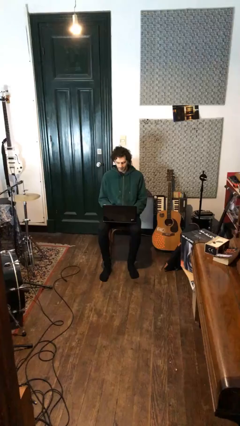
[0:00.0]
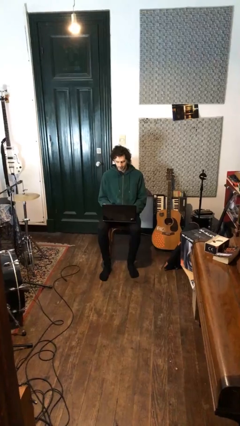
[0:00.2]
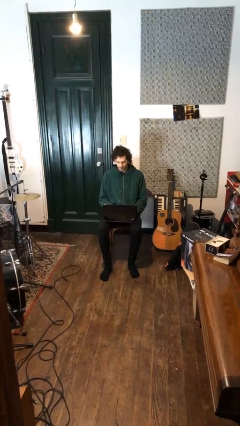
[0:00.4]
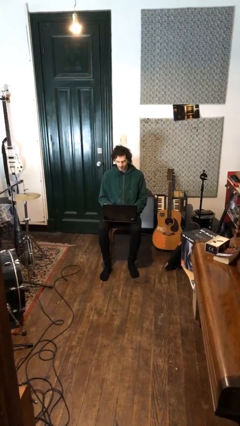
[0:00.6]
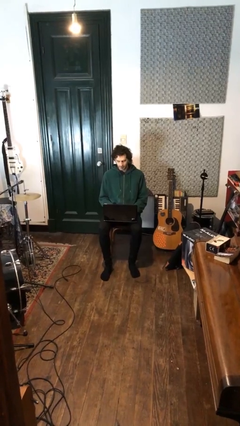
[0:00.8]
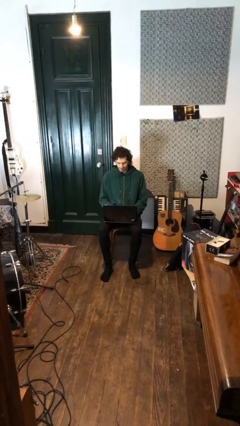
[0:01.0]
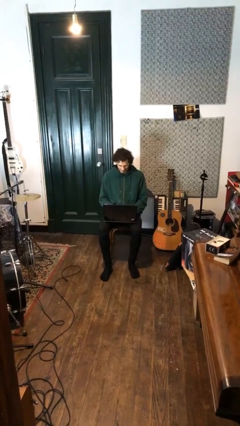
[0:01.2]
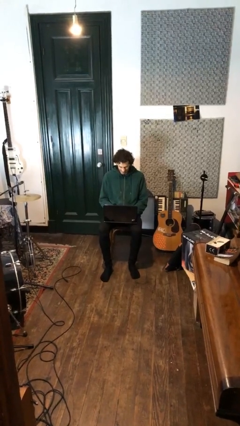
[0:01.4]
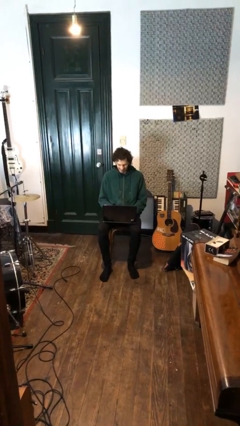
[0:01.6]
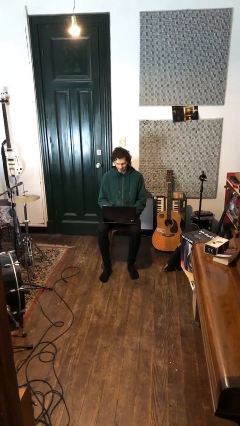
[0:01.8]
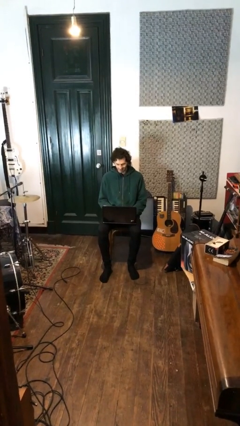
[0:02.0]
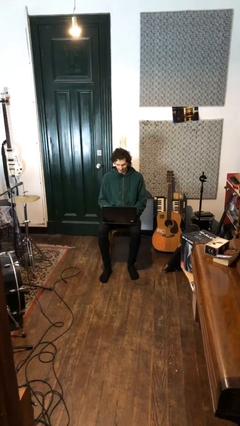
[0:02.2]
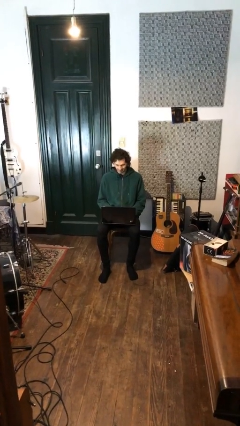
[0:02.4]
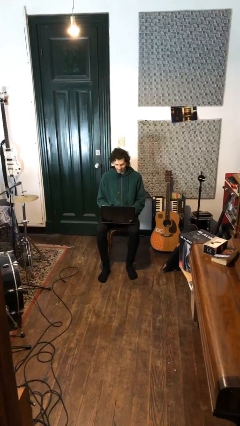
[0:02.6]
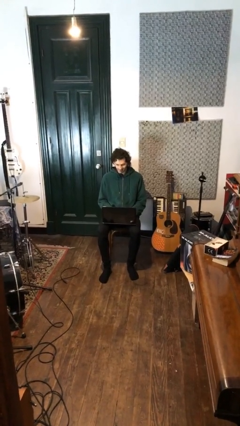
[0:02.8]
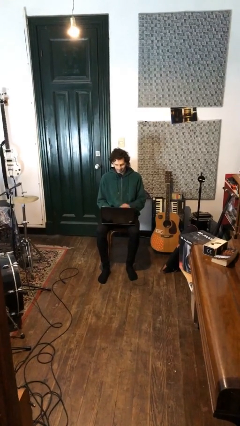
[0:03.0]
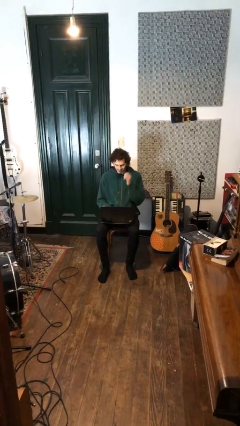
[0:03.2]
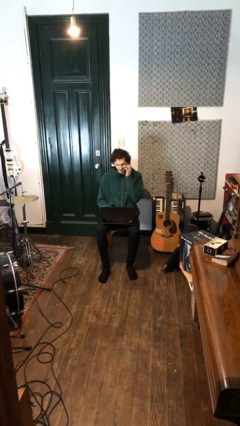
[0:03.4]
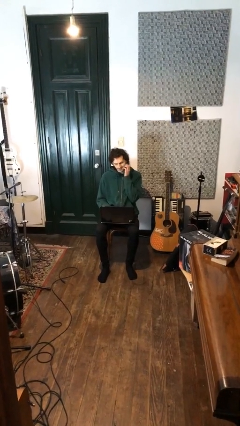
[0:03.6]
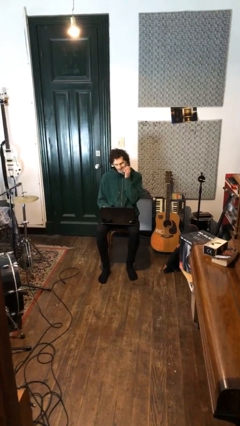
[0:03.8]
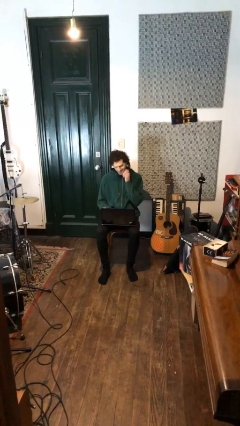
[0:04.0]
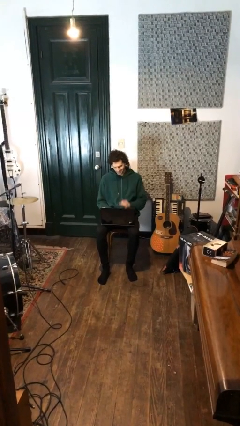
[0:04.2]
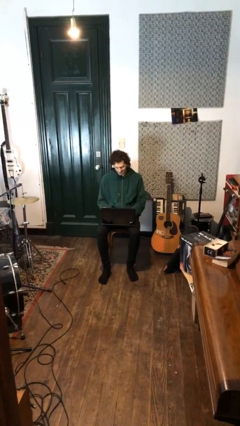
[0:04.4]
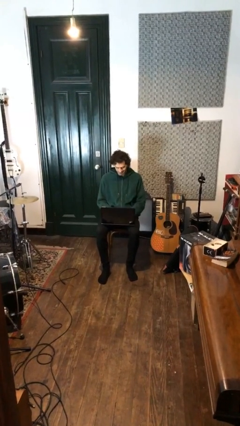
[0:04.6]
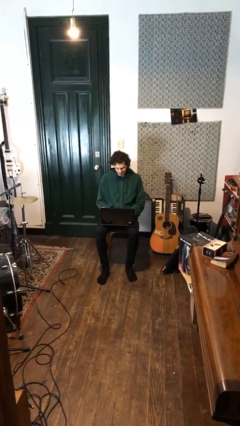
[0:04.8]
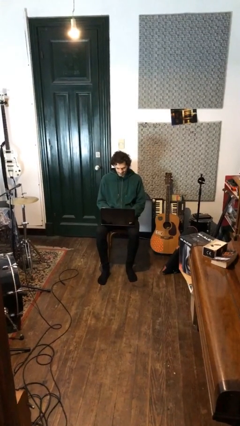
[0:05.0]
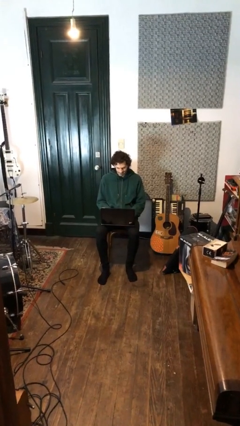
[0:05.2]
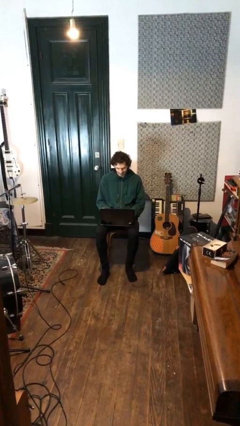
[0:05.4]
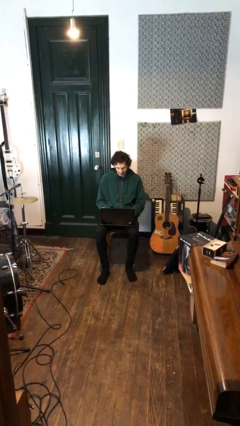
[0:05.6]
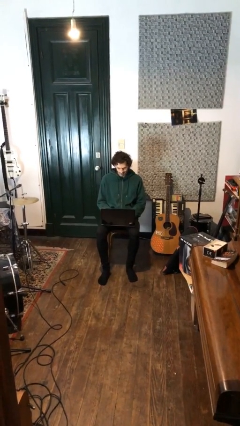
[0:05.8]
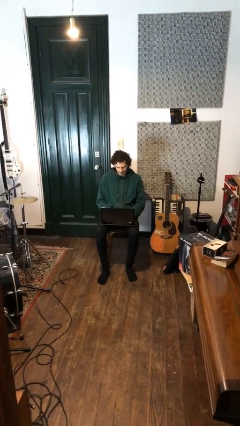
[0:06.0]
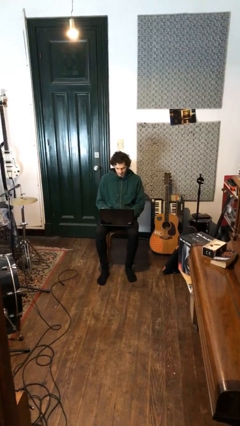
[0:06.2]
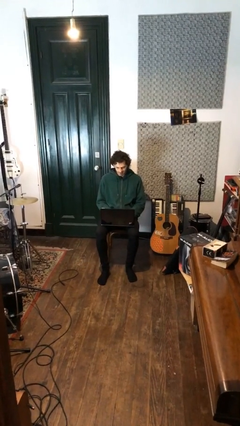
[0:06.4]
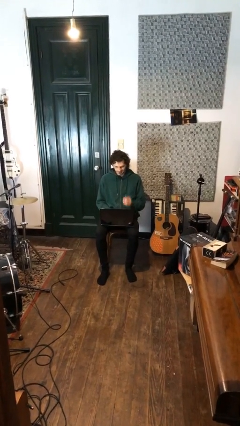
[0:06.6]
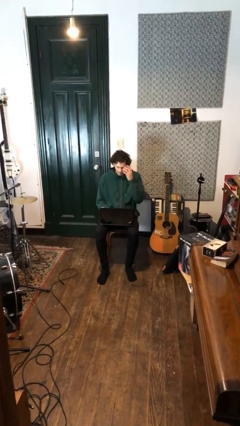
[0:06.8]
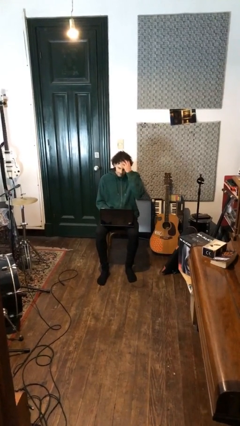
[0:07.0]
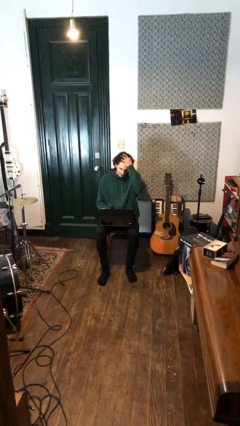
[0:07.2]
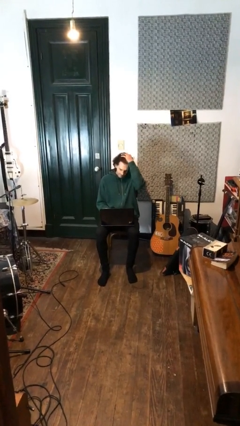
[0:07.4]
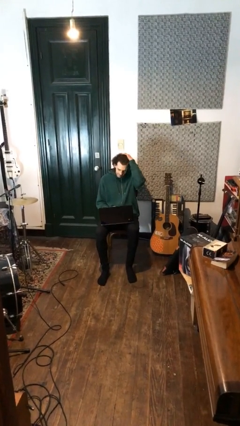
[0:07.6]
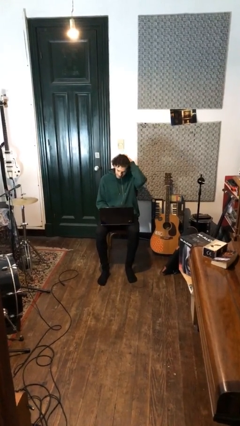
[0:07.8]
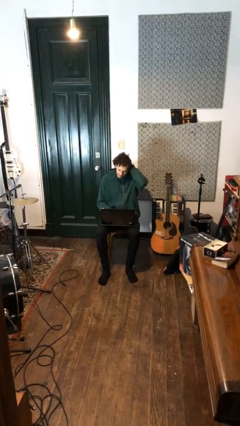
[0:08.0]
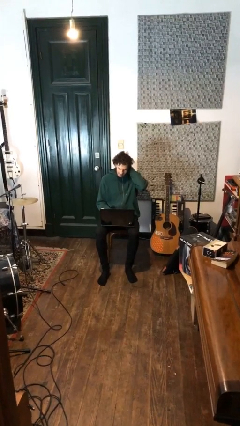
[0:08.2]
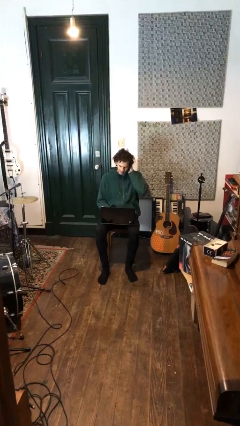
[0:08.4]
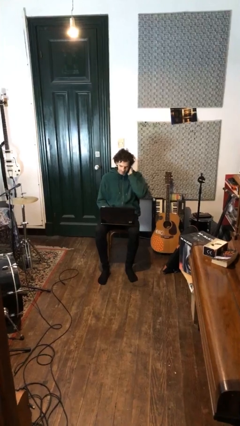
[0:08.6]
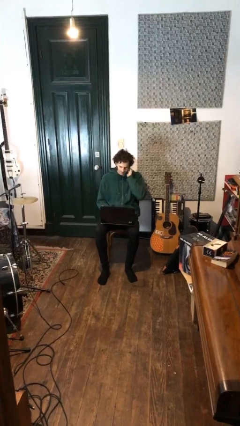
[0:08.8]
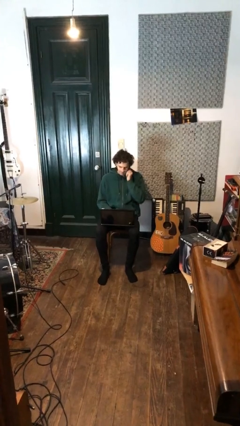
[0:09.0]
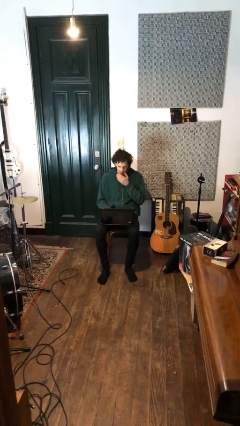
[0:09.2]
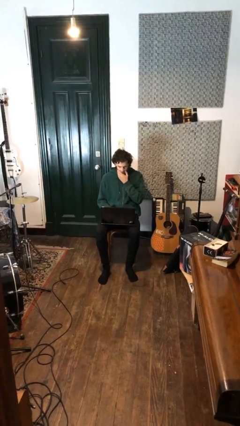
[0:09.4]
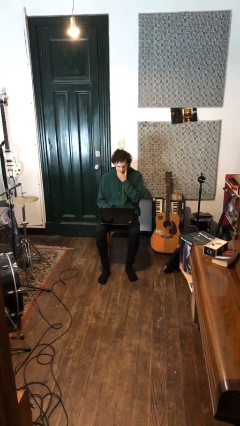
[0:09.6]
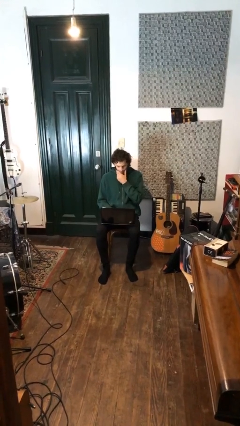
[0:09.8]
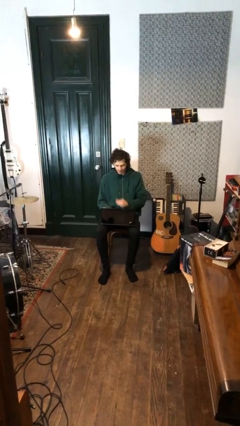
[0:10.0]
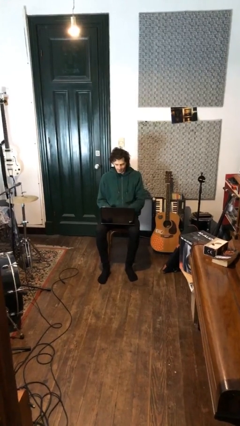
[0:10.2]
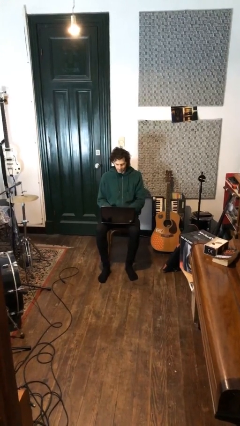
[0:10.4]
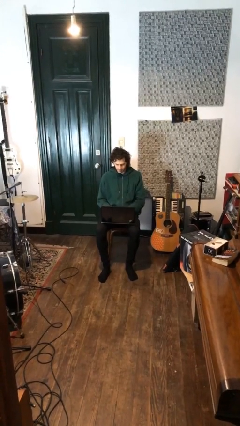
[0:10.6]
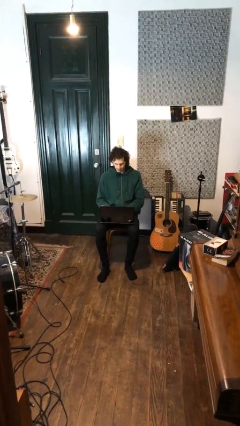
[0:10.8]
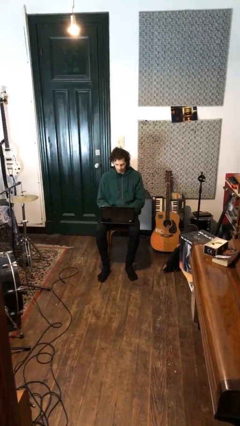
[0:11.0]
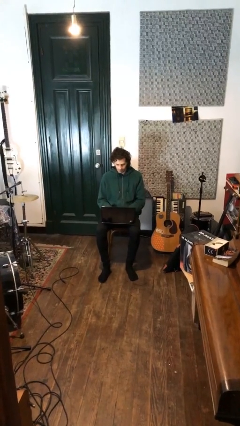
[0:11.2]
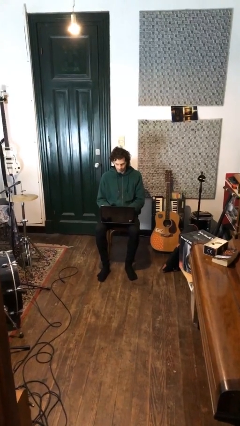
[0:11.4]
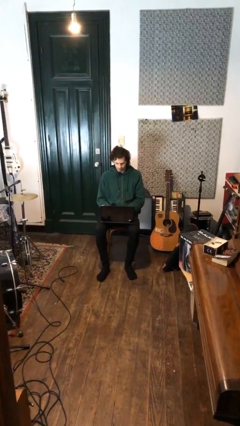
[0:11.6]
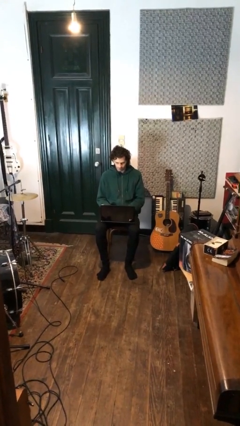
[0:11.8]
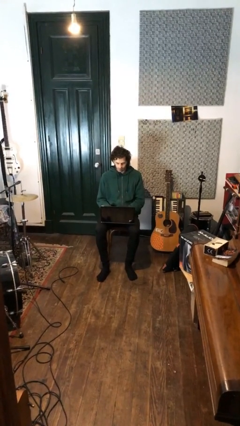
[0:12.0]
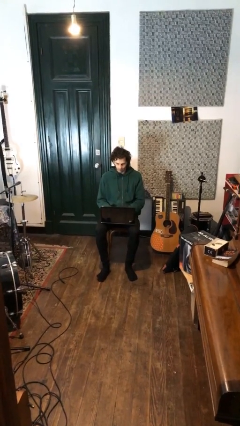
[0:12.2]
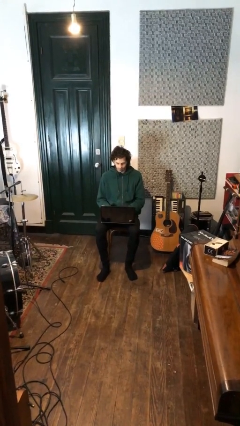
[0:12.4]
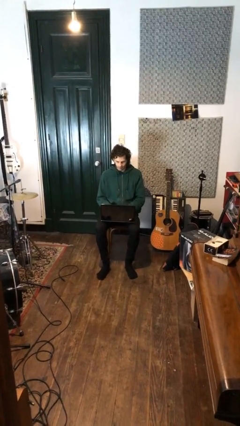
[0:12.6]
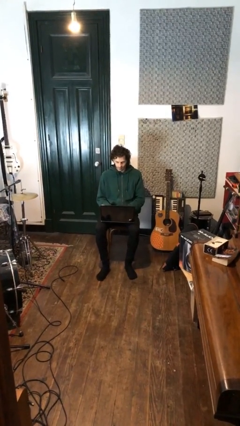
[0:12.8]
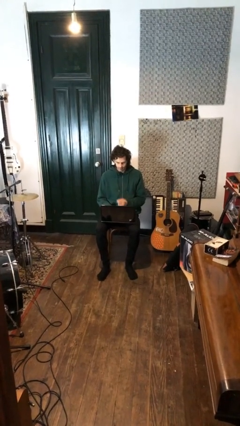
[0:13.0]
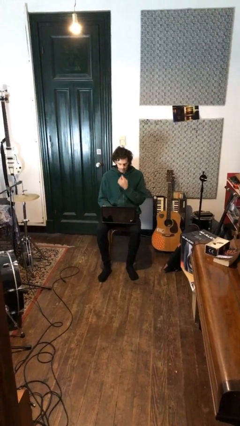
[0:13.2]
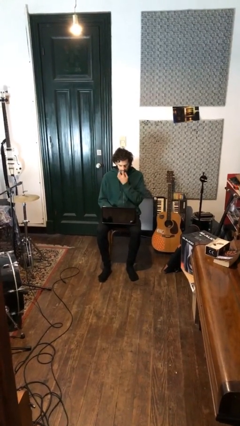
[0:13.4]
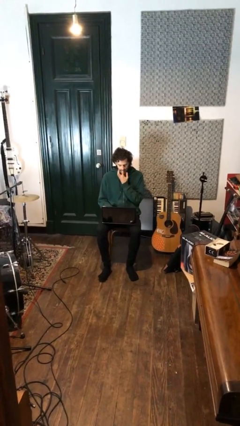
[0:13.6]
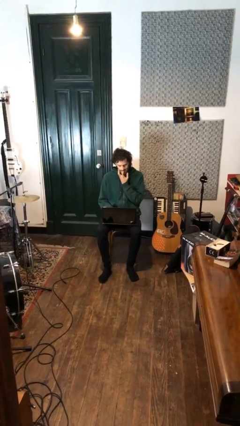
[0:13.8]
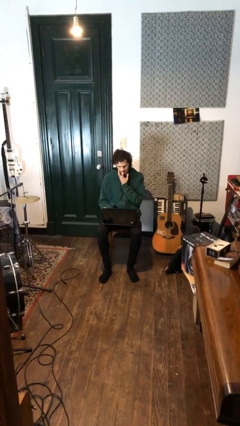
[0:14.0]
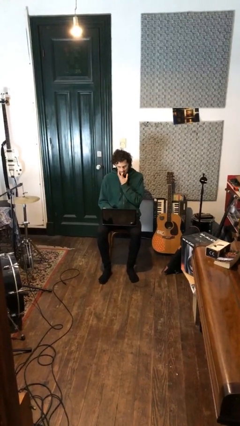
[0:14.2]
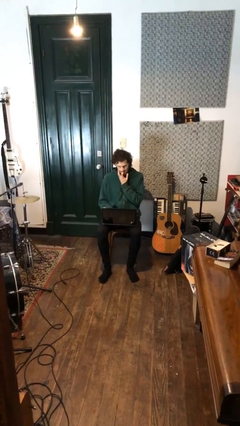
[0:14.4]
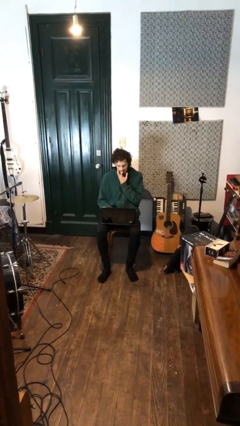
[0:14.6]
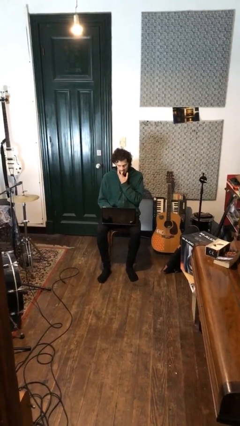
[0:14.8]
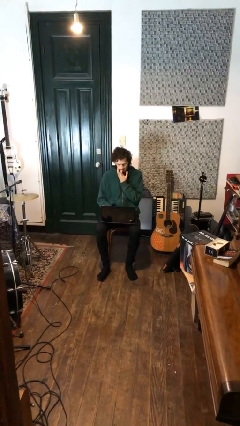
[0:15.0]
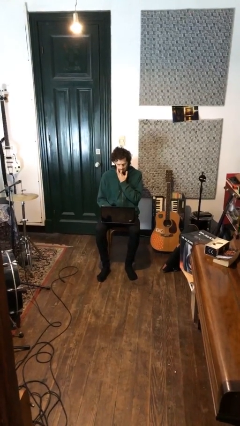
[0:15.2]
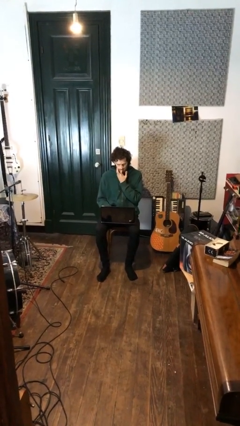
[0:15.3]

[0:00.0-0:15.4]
person interacts with laptop

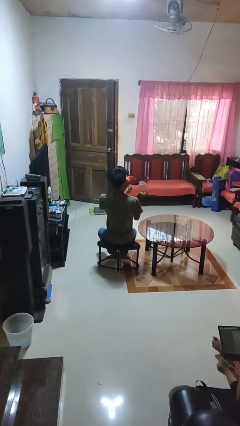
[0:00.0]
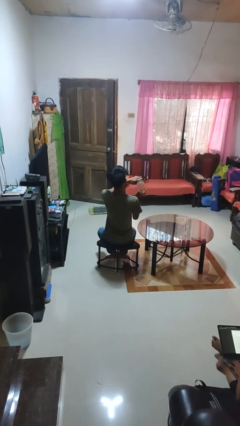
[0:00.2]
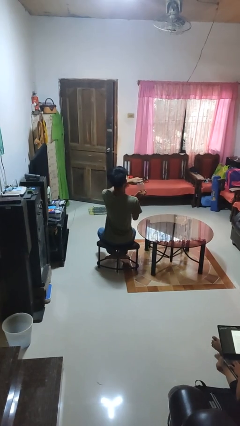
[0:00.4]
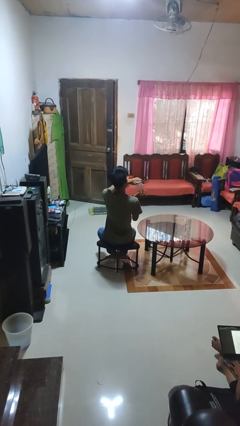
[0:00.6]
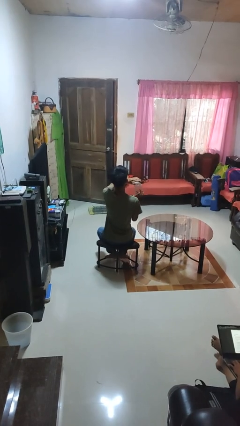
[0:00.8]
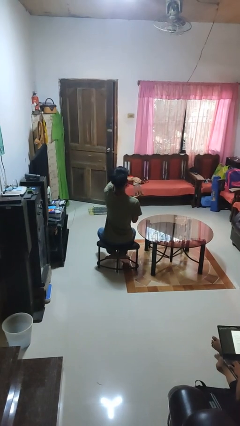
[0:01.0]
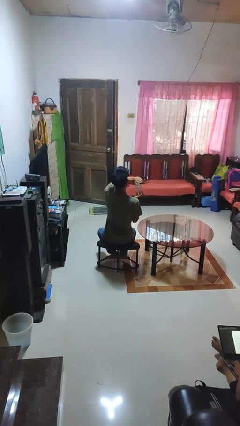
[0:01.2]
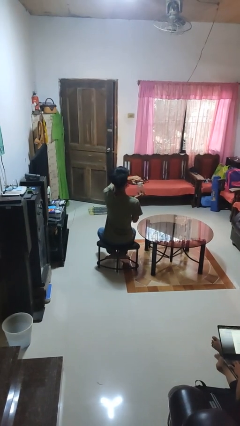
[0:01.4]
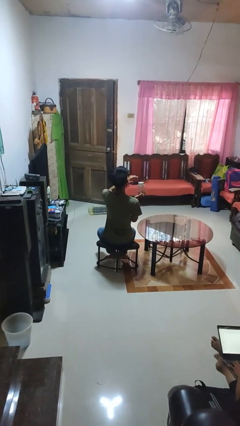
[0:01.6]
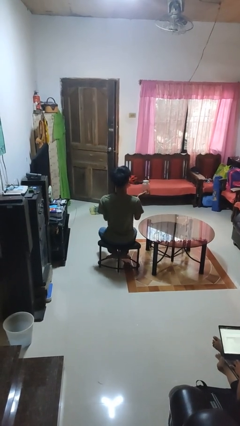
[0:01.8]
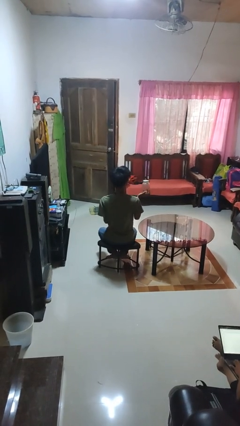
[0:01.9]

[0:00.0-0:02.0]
person closes jar

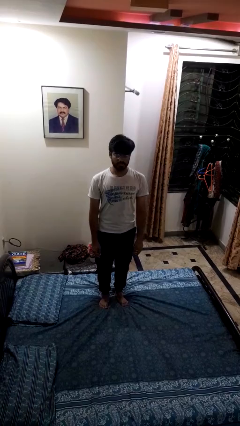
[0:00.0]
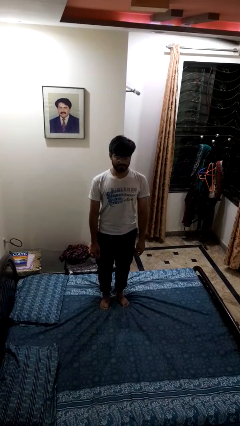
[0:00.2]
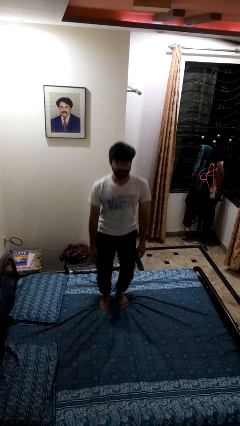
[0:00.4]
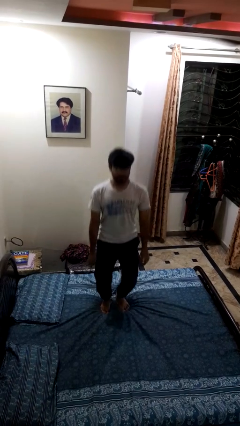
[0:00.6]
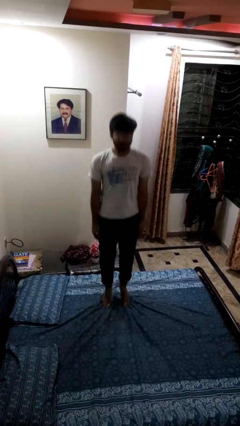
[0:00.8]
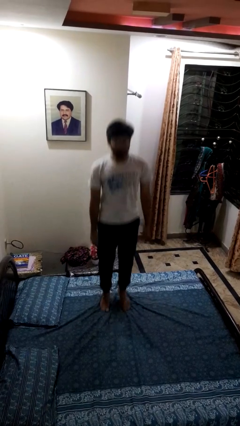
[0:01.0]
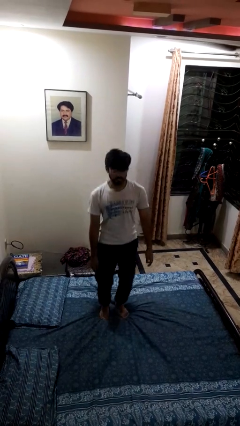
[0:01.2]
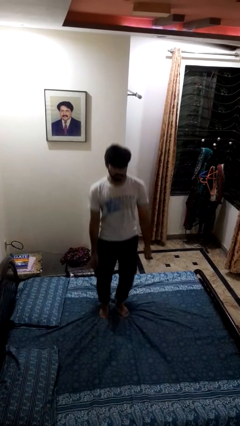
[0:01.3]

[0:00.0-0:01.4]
person jumps on bed
